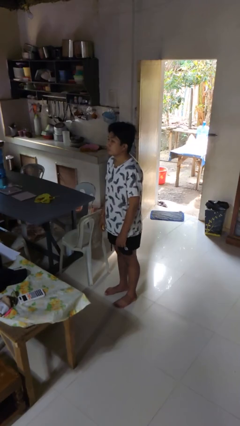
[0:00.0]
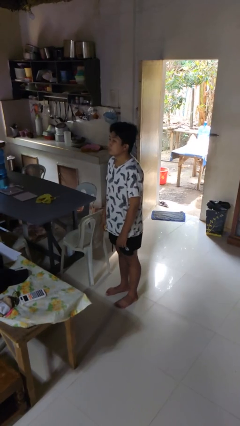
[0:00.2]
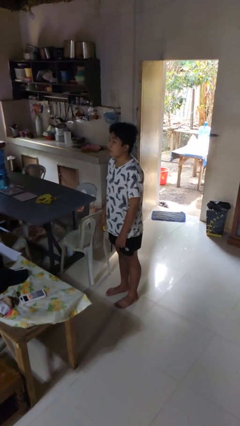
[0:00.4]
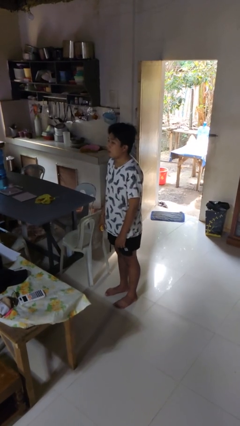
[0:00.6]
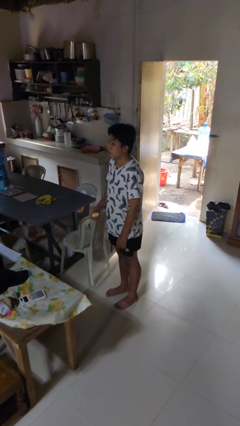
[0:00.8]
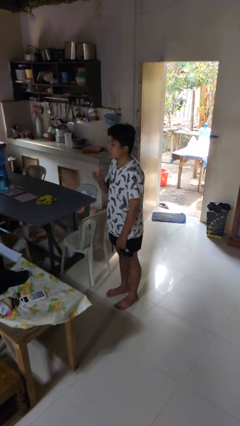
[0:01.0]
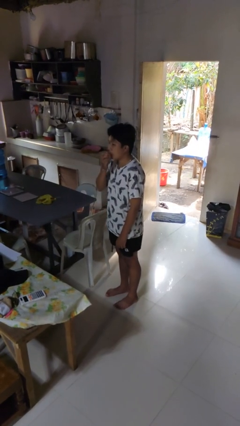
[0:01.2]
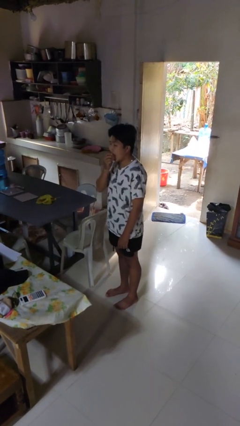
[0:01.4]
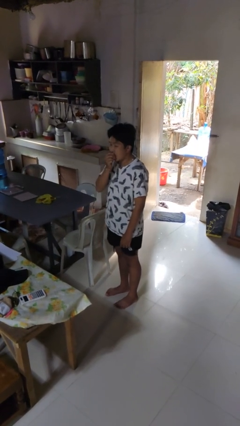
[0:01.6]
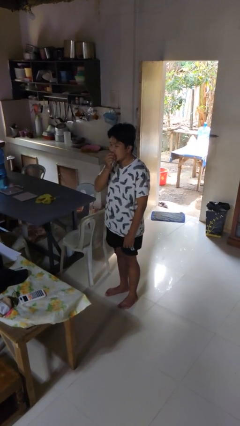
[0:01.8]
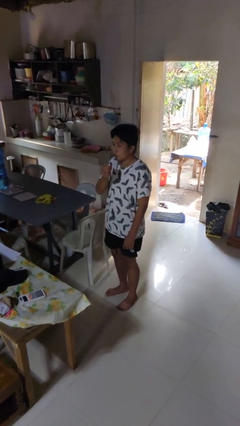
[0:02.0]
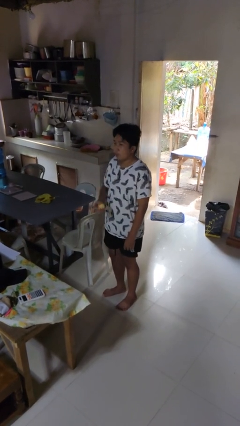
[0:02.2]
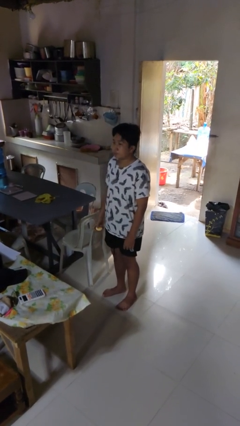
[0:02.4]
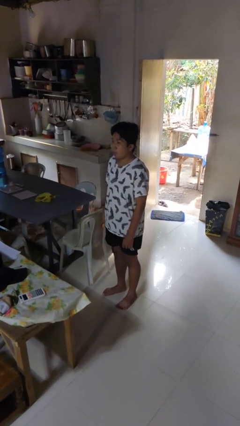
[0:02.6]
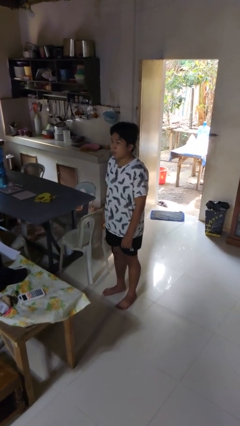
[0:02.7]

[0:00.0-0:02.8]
person eats apple

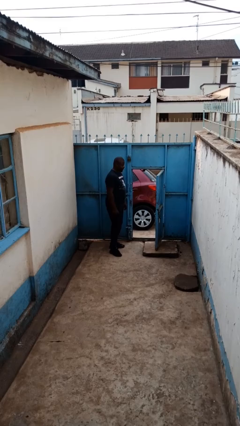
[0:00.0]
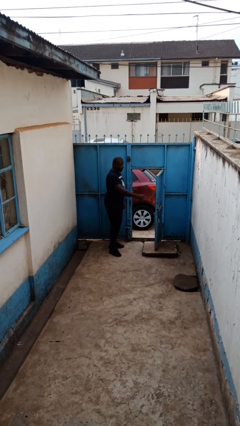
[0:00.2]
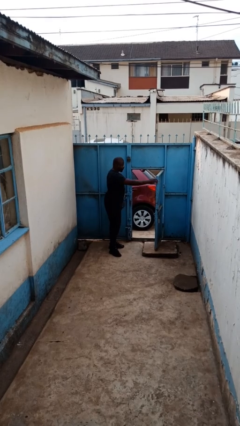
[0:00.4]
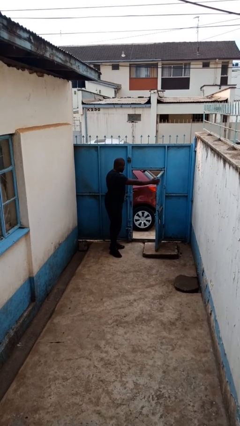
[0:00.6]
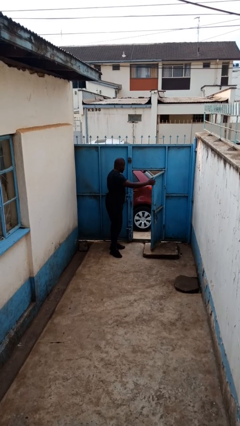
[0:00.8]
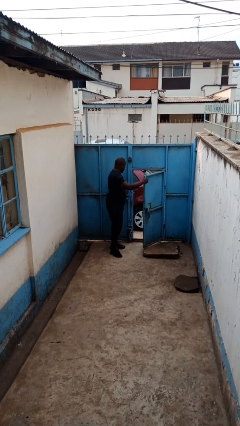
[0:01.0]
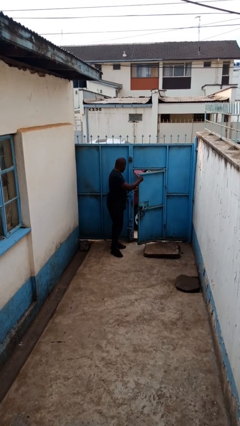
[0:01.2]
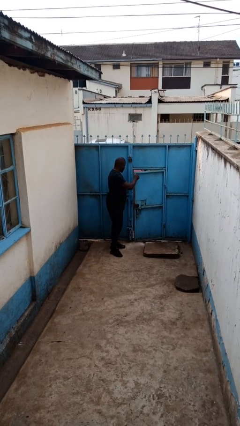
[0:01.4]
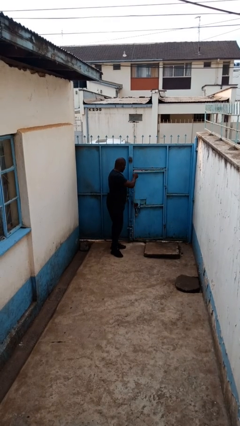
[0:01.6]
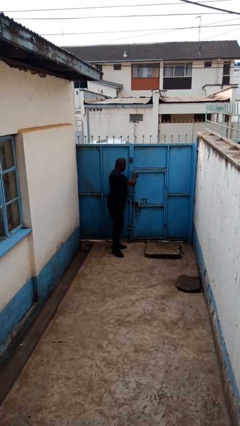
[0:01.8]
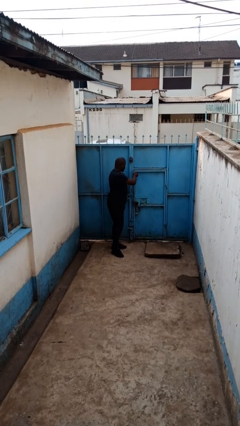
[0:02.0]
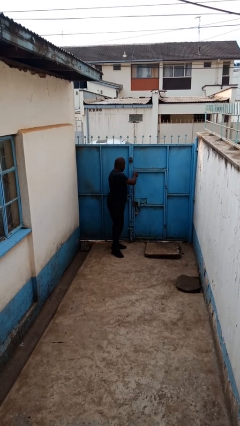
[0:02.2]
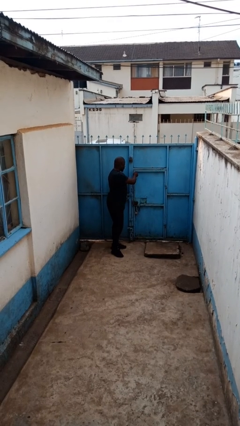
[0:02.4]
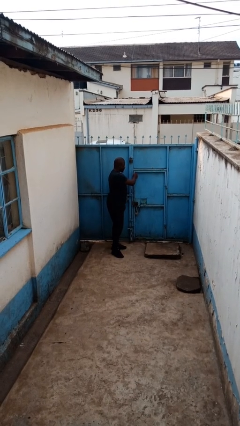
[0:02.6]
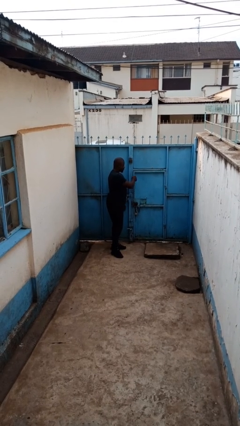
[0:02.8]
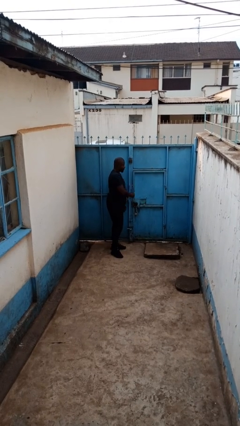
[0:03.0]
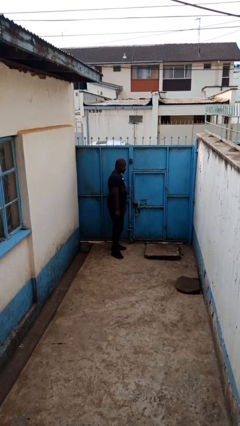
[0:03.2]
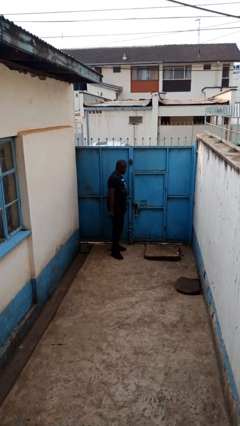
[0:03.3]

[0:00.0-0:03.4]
person closes gate

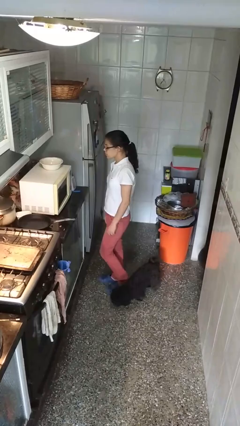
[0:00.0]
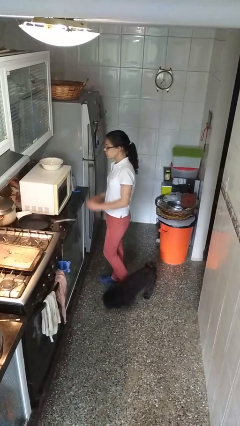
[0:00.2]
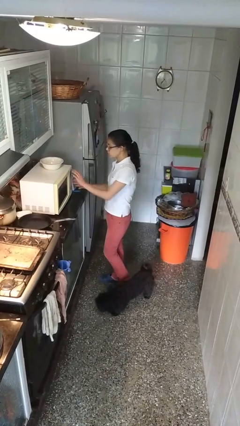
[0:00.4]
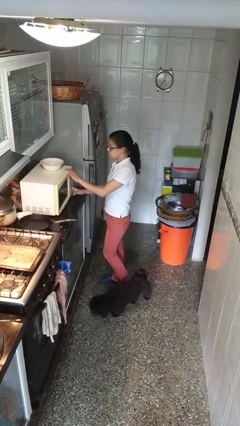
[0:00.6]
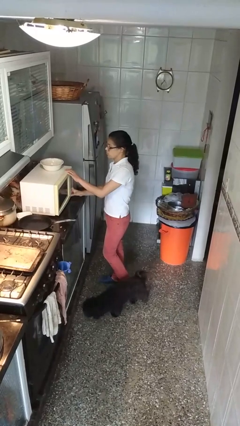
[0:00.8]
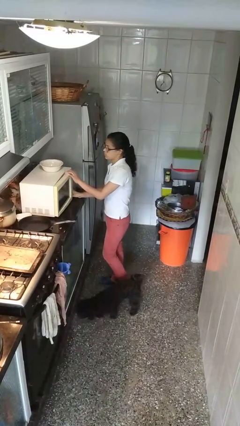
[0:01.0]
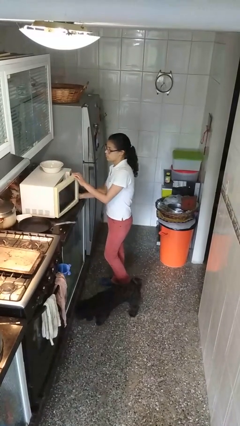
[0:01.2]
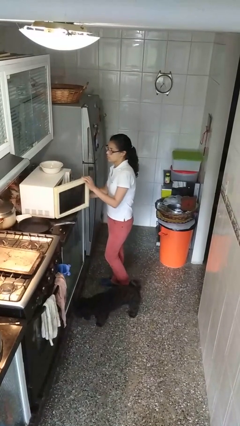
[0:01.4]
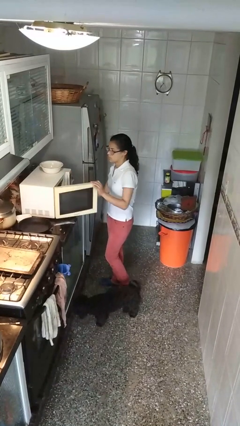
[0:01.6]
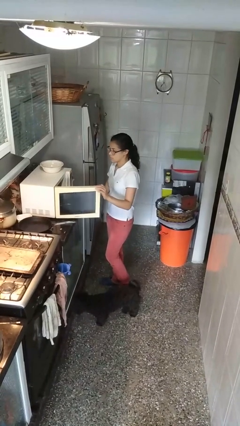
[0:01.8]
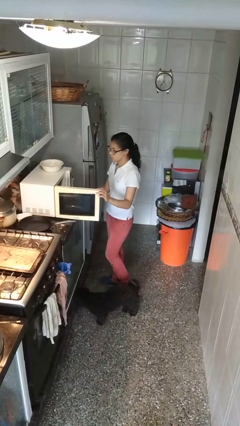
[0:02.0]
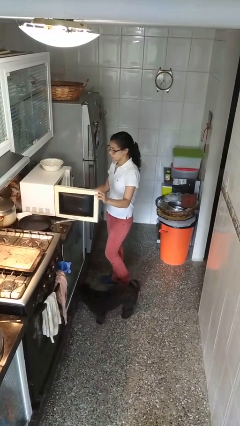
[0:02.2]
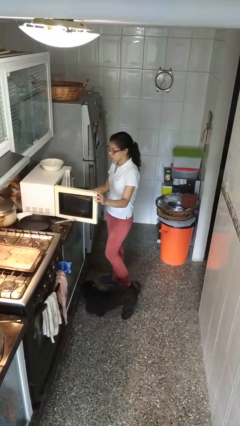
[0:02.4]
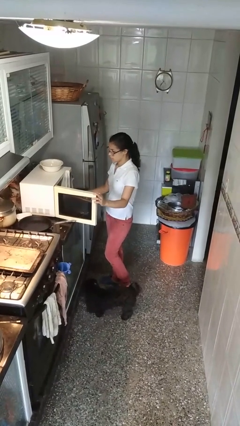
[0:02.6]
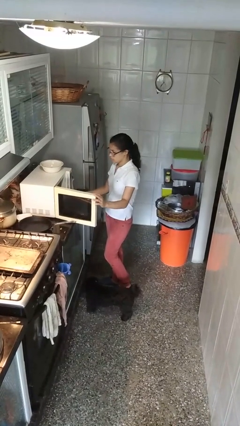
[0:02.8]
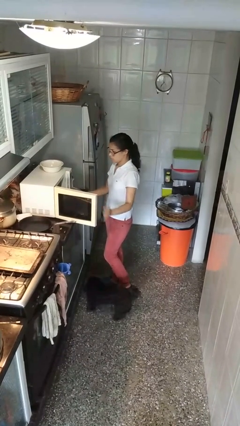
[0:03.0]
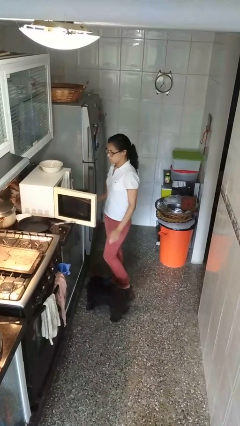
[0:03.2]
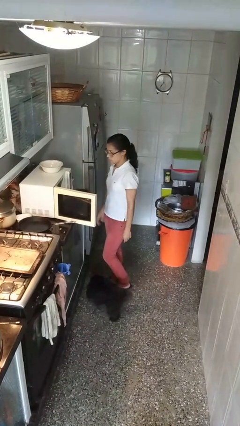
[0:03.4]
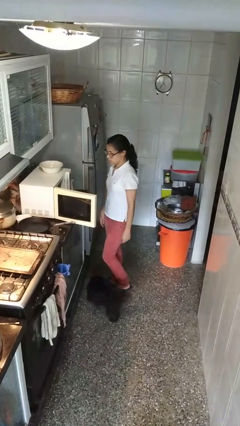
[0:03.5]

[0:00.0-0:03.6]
person opens microwave

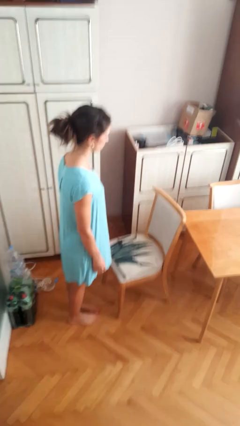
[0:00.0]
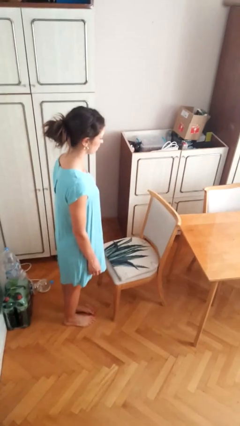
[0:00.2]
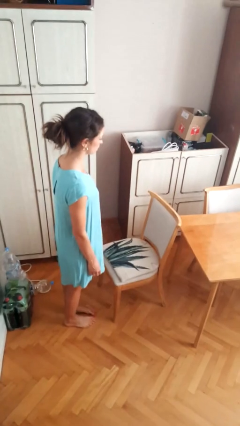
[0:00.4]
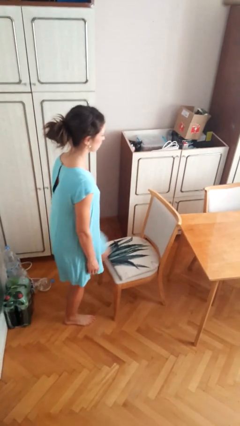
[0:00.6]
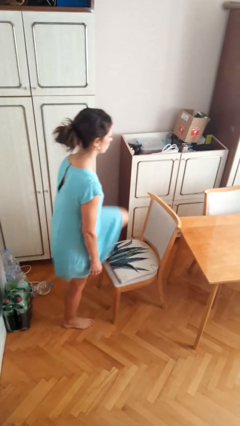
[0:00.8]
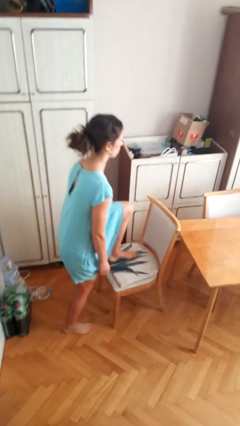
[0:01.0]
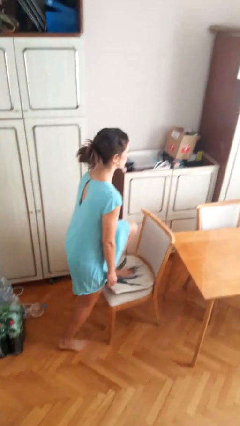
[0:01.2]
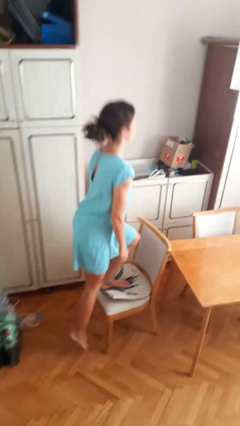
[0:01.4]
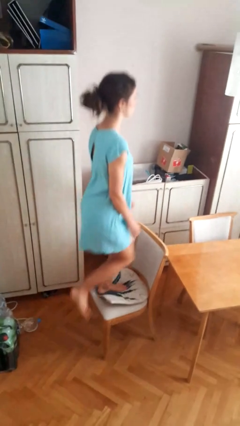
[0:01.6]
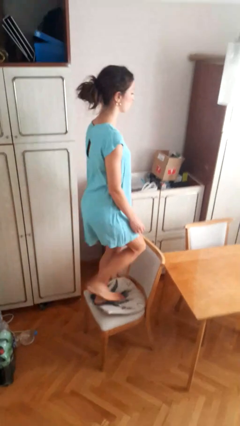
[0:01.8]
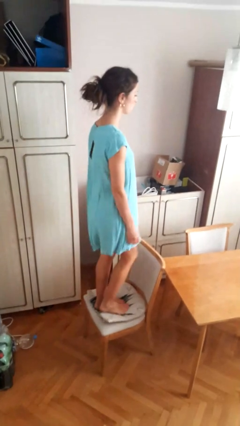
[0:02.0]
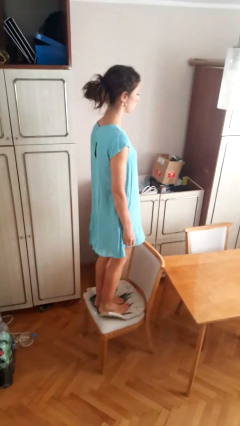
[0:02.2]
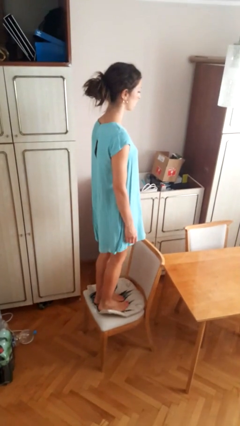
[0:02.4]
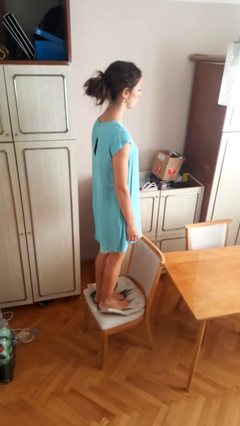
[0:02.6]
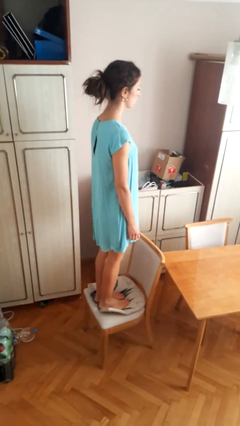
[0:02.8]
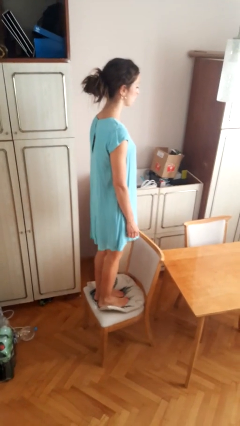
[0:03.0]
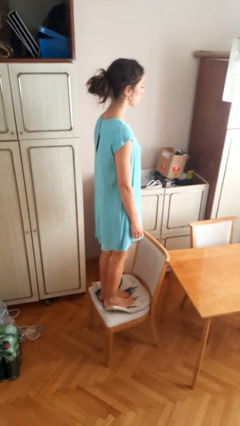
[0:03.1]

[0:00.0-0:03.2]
person climbs on chair

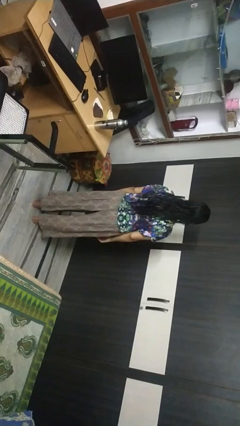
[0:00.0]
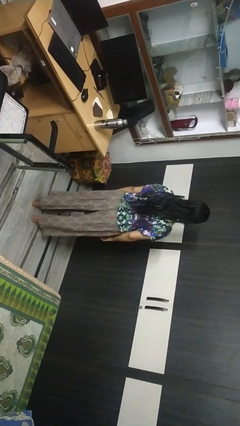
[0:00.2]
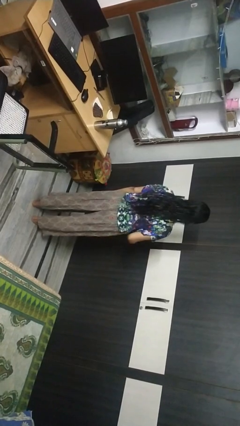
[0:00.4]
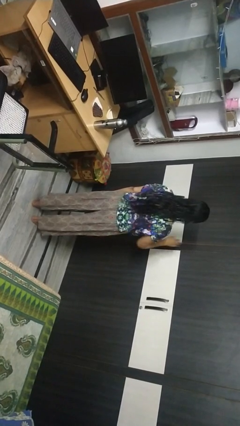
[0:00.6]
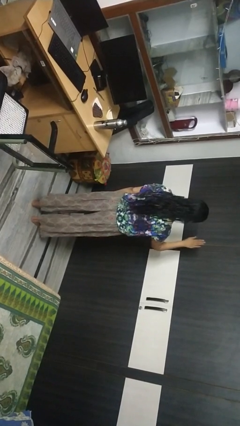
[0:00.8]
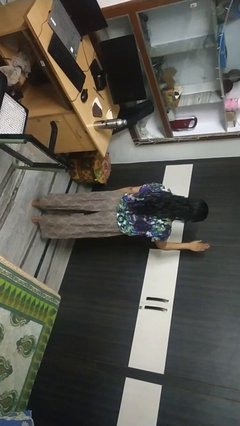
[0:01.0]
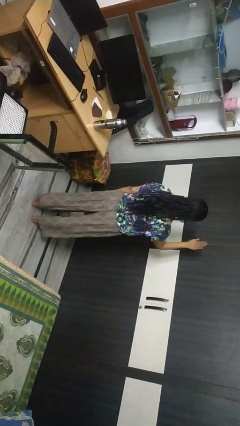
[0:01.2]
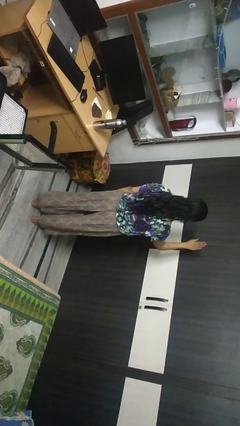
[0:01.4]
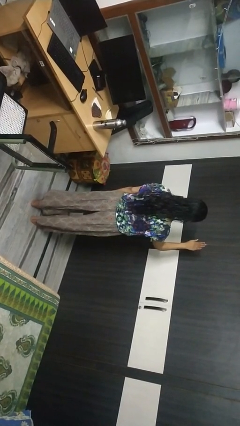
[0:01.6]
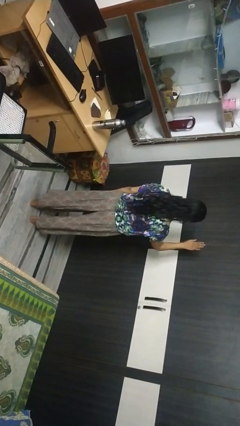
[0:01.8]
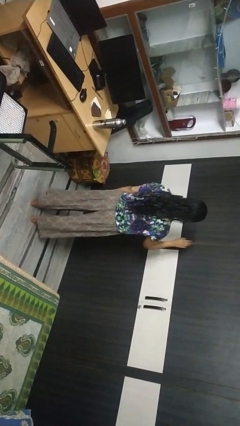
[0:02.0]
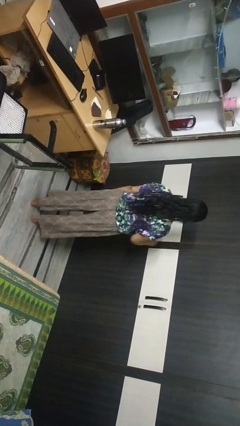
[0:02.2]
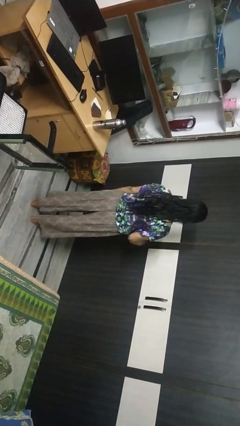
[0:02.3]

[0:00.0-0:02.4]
person gestures stop

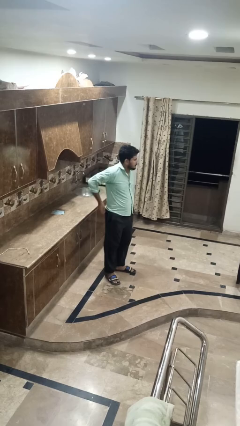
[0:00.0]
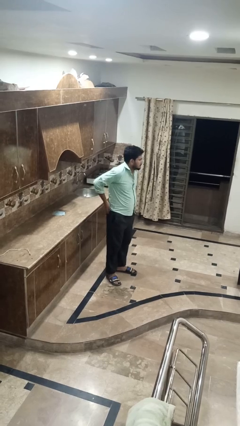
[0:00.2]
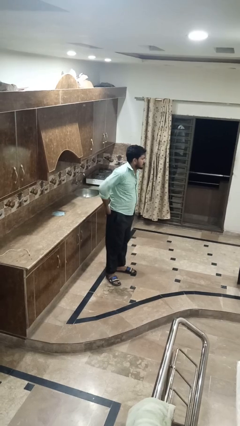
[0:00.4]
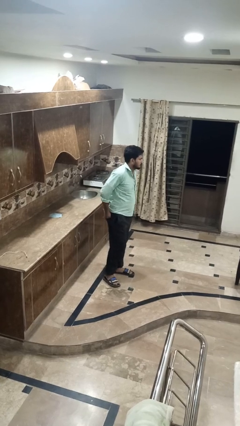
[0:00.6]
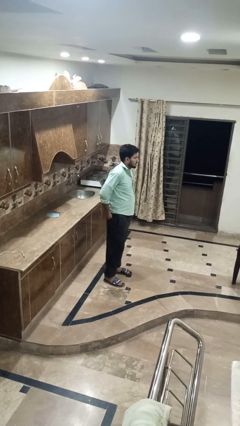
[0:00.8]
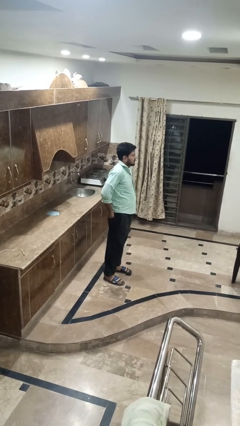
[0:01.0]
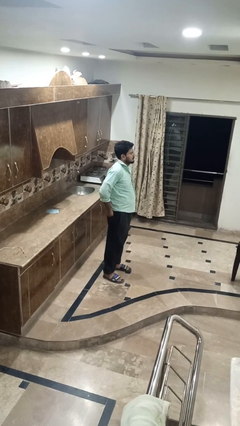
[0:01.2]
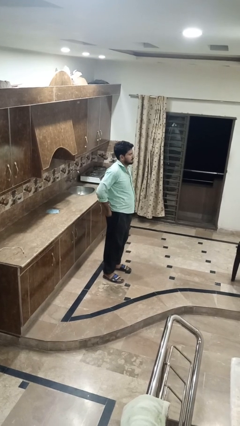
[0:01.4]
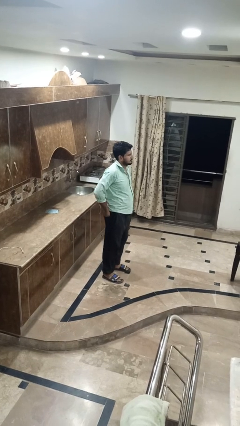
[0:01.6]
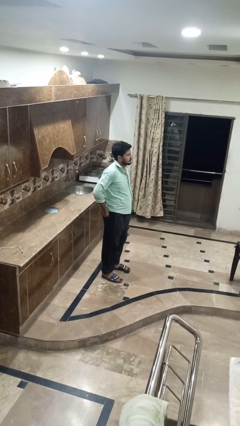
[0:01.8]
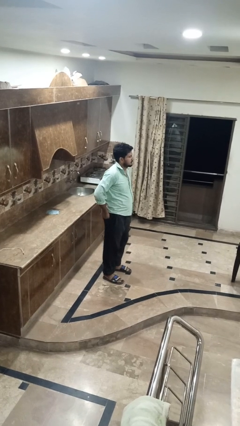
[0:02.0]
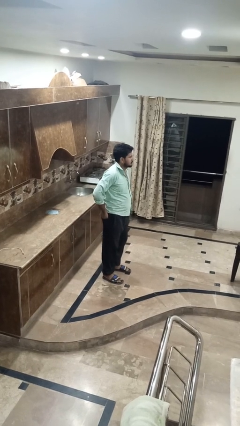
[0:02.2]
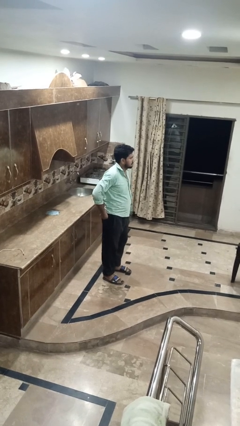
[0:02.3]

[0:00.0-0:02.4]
person puts hands in back pockets
